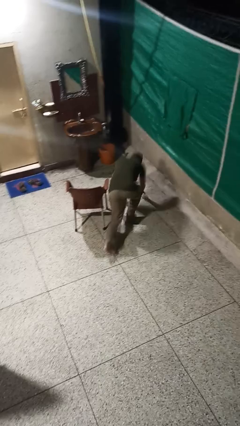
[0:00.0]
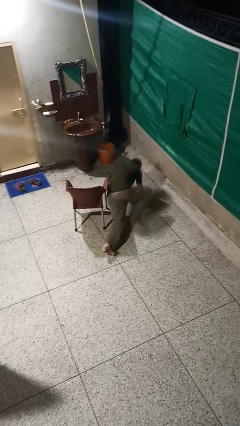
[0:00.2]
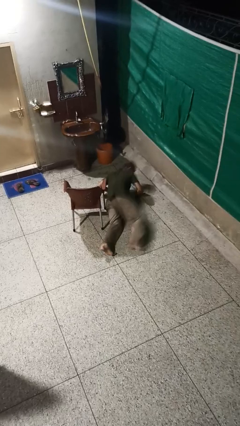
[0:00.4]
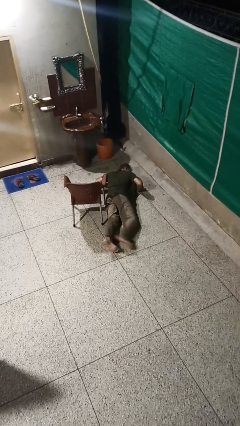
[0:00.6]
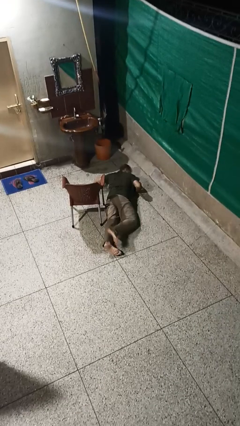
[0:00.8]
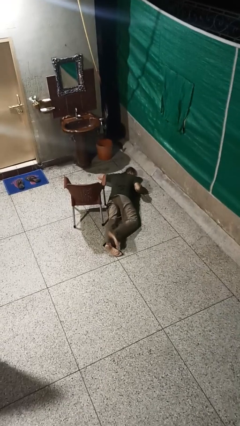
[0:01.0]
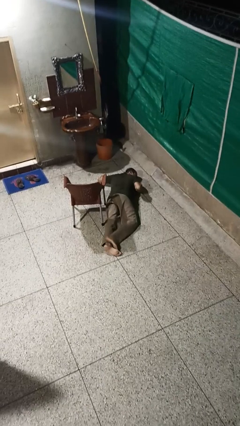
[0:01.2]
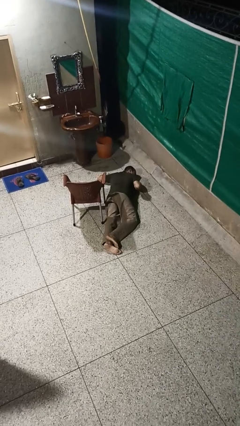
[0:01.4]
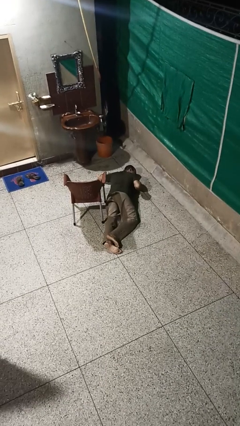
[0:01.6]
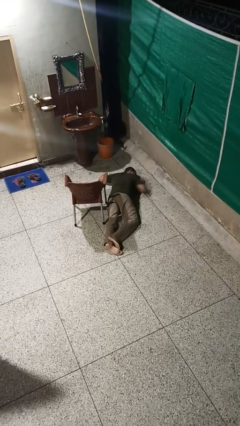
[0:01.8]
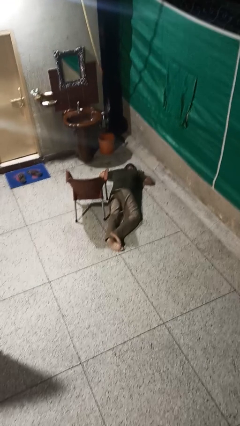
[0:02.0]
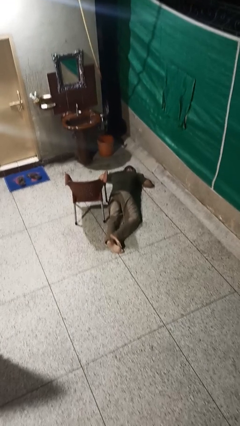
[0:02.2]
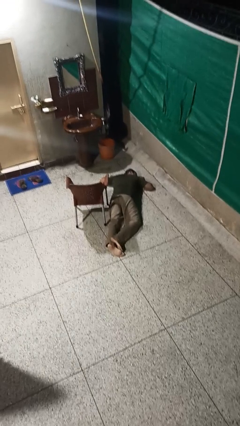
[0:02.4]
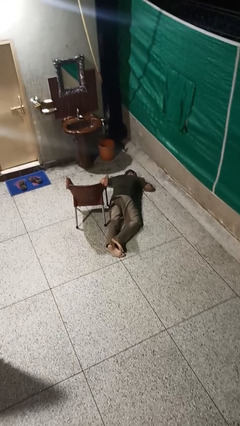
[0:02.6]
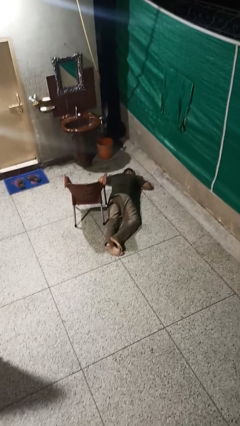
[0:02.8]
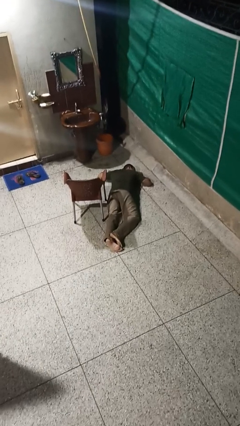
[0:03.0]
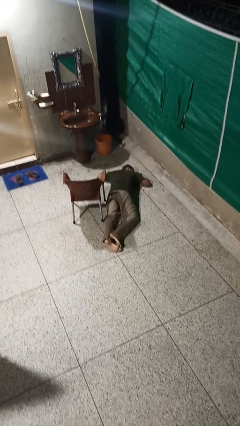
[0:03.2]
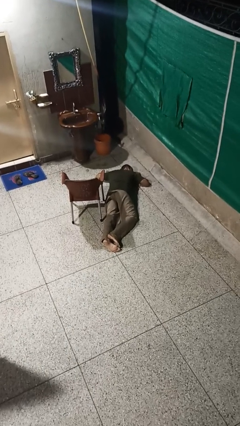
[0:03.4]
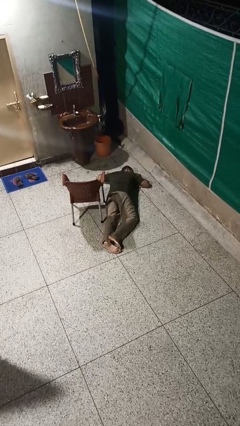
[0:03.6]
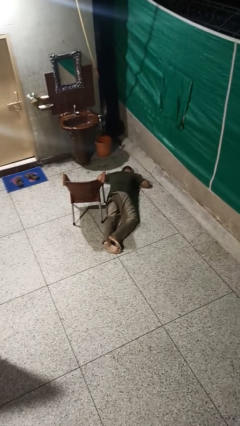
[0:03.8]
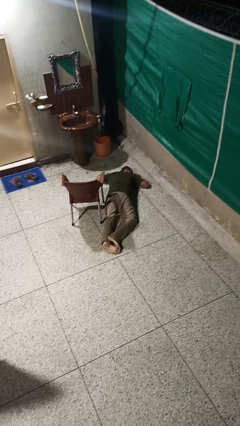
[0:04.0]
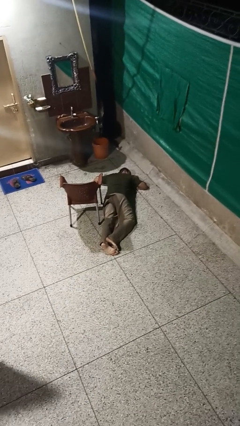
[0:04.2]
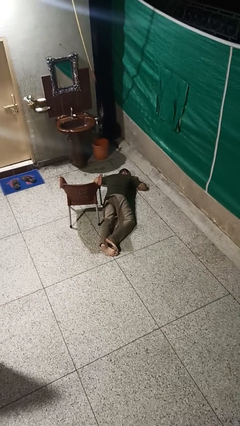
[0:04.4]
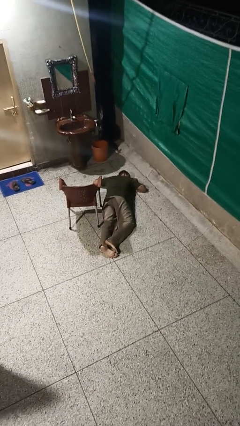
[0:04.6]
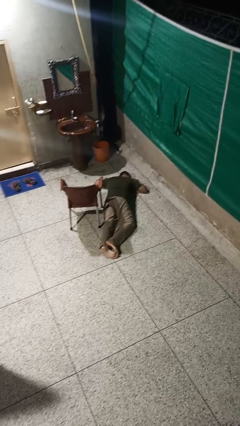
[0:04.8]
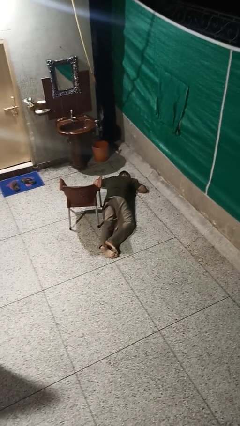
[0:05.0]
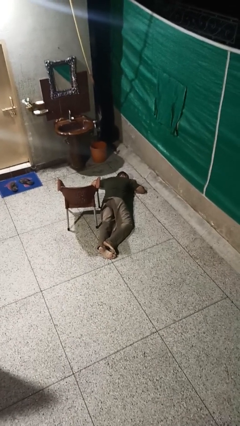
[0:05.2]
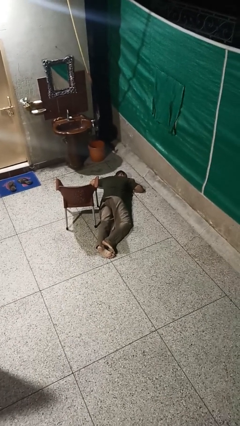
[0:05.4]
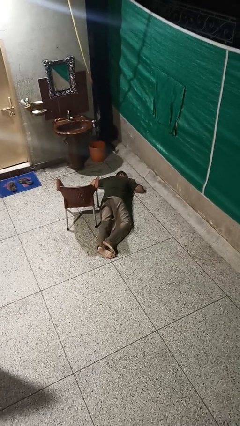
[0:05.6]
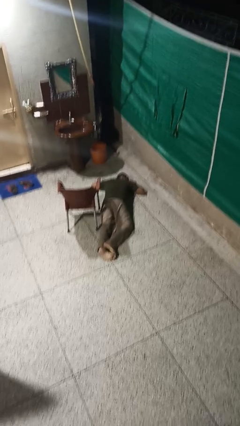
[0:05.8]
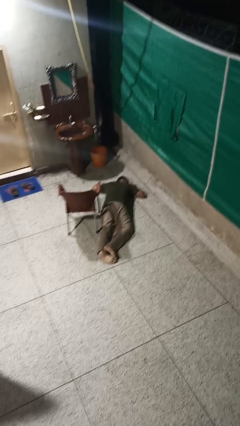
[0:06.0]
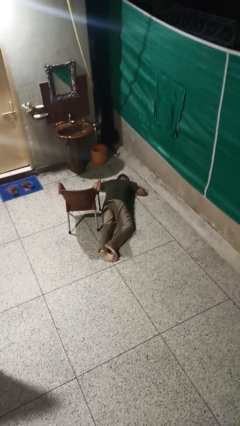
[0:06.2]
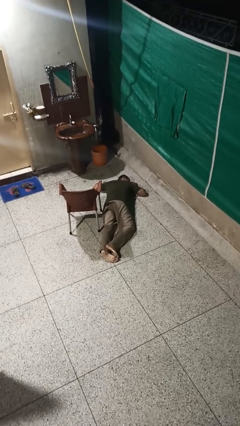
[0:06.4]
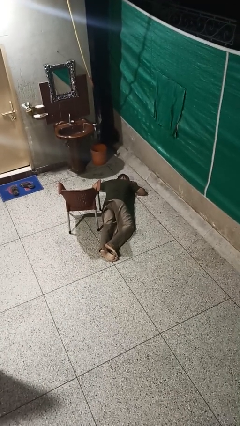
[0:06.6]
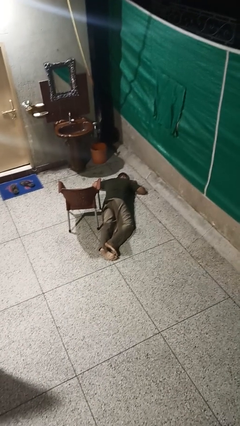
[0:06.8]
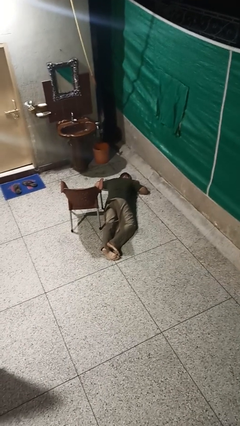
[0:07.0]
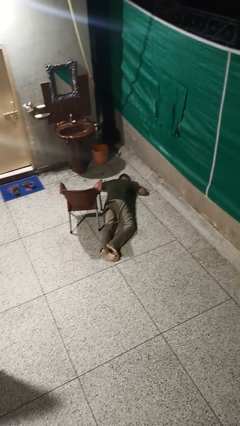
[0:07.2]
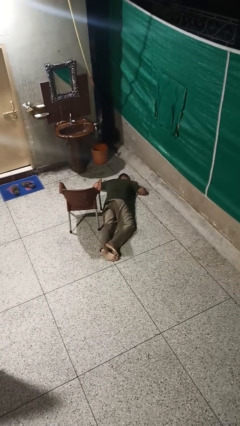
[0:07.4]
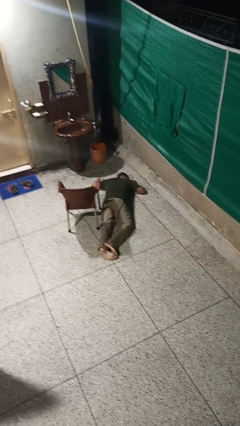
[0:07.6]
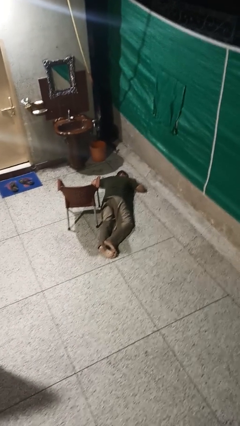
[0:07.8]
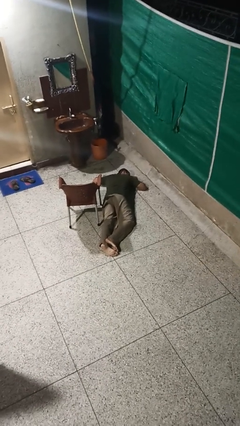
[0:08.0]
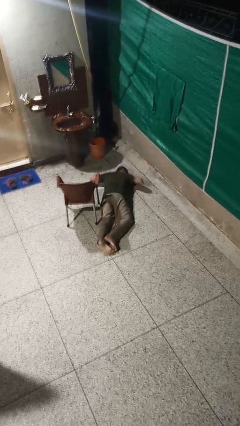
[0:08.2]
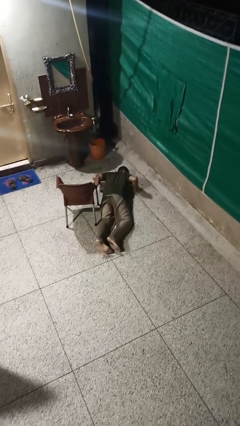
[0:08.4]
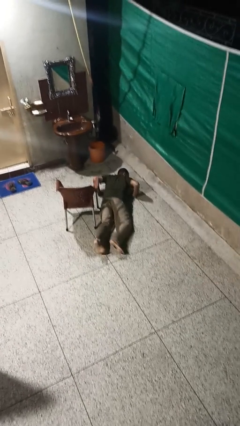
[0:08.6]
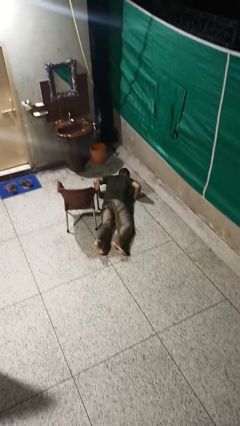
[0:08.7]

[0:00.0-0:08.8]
person lies down on floor

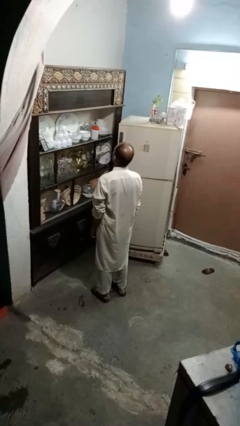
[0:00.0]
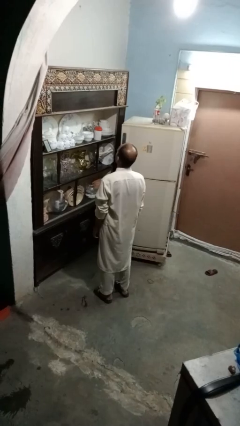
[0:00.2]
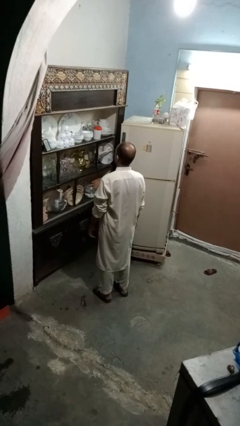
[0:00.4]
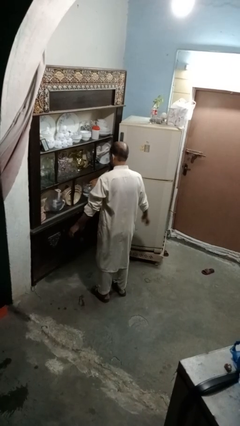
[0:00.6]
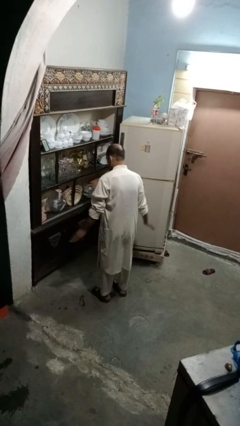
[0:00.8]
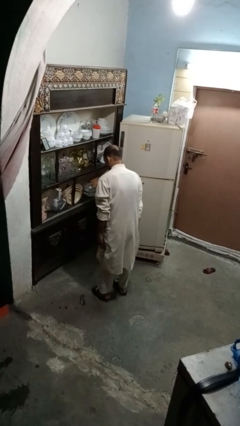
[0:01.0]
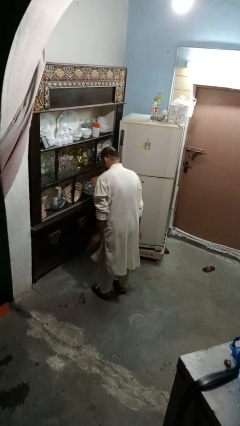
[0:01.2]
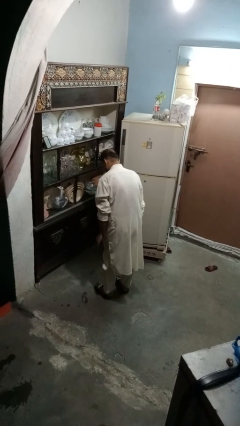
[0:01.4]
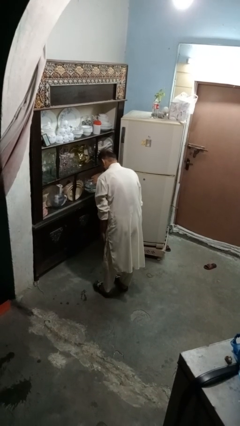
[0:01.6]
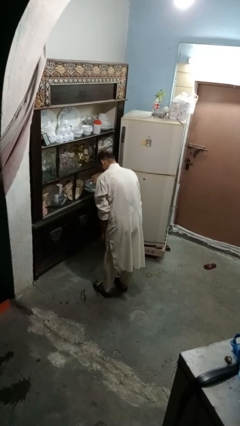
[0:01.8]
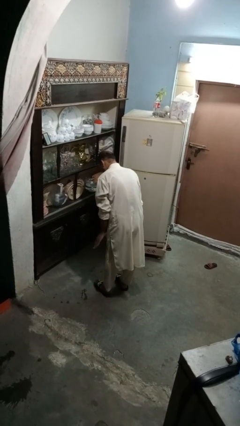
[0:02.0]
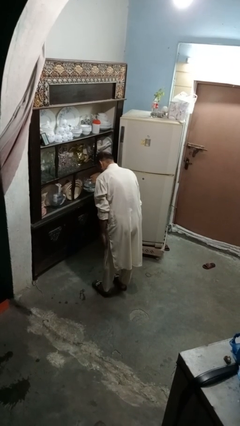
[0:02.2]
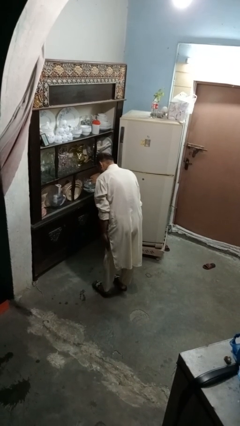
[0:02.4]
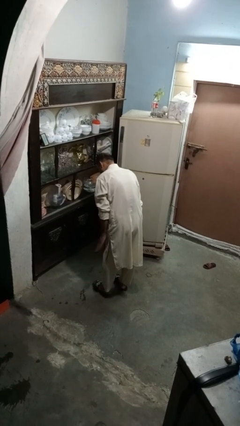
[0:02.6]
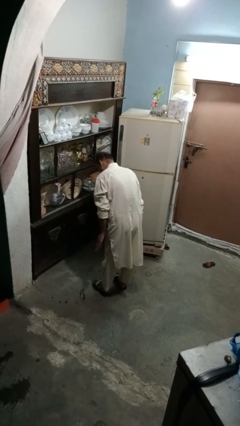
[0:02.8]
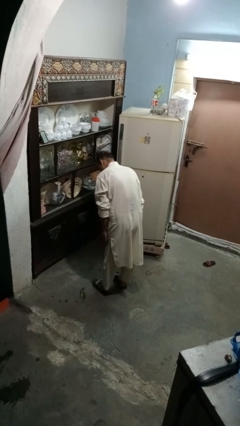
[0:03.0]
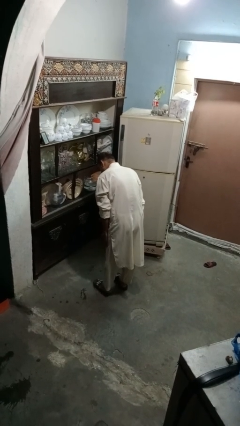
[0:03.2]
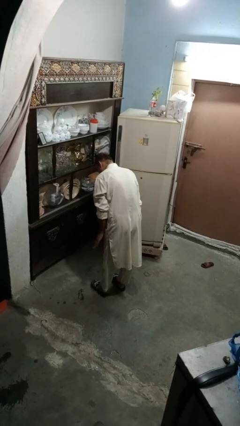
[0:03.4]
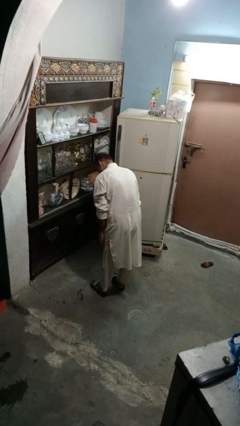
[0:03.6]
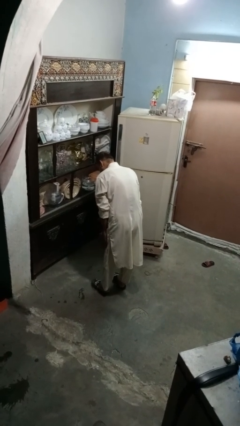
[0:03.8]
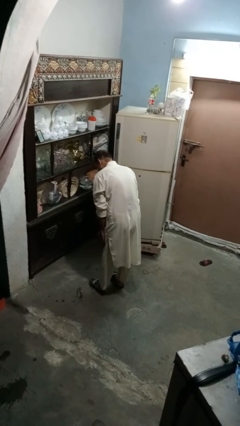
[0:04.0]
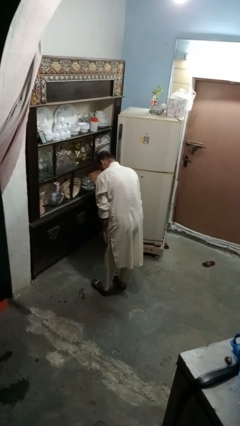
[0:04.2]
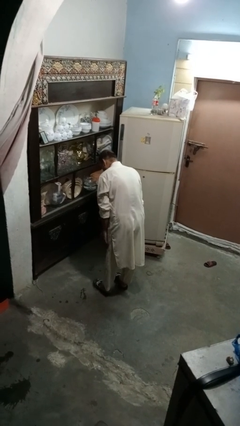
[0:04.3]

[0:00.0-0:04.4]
person slaps hands on thighs

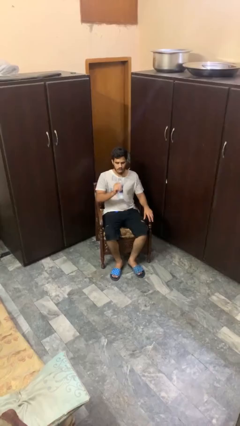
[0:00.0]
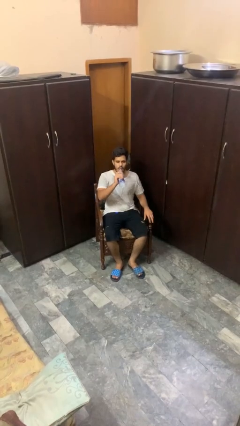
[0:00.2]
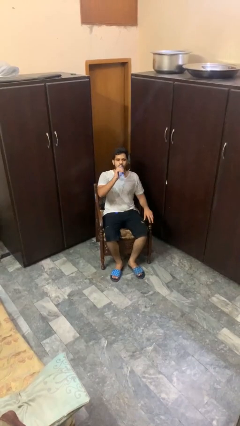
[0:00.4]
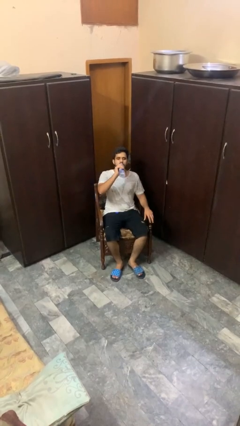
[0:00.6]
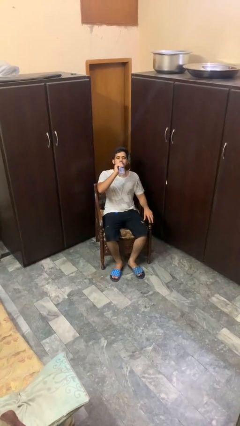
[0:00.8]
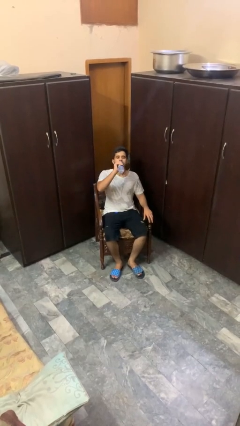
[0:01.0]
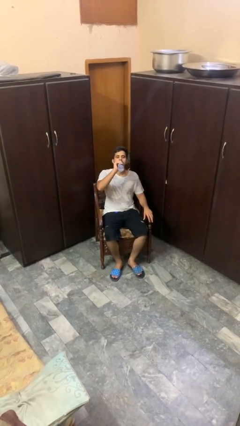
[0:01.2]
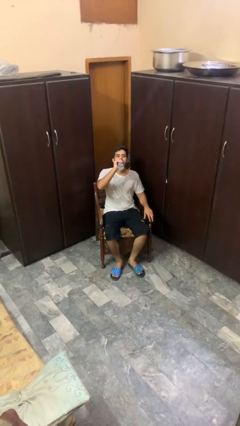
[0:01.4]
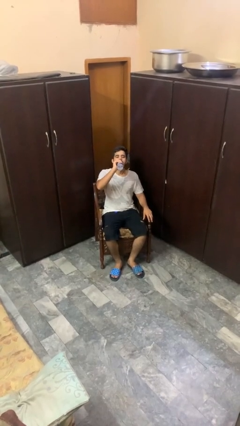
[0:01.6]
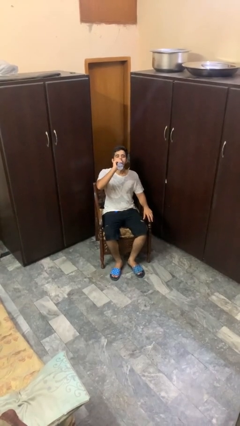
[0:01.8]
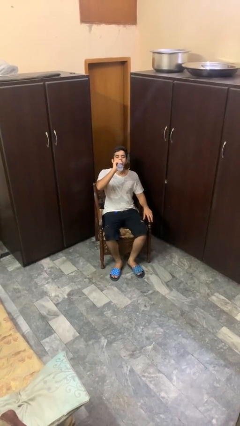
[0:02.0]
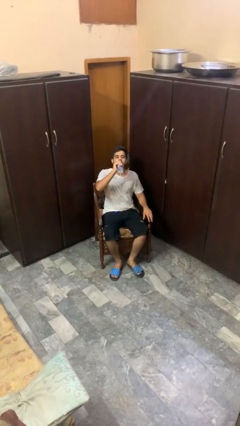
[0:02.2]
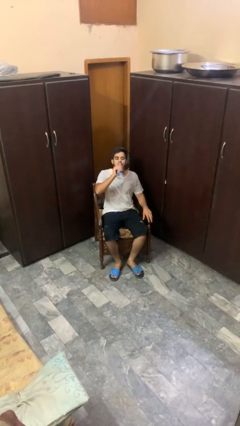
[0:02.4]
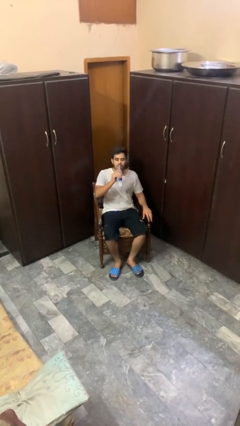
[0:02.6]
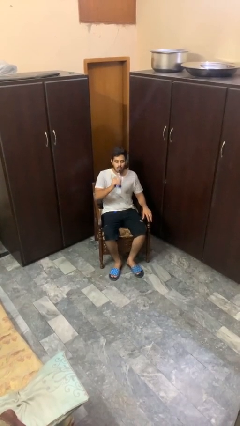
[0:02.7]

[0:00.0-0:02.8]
person drinks from bottle

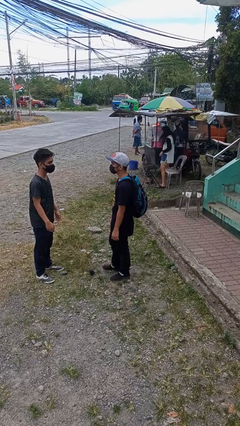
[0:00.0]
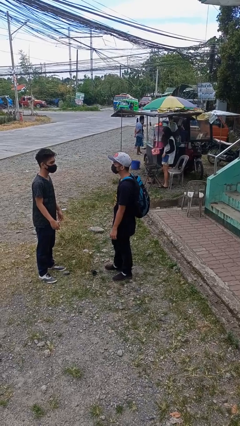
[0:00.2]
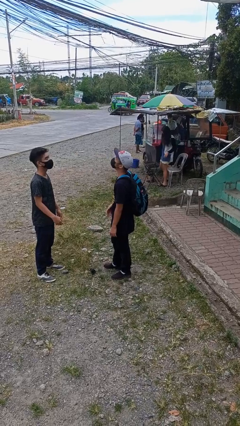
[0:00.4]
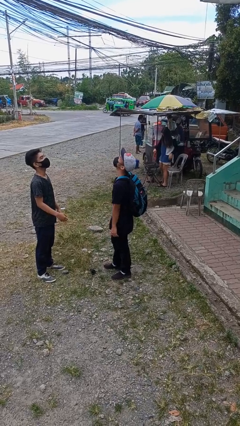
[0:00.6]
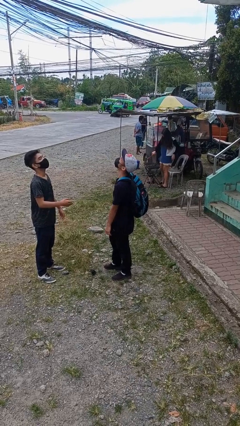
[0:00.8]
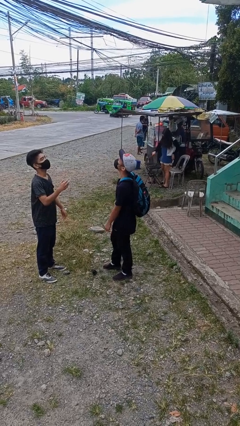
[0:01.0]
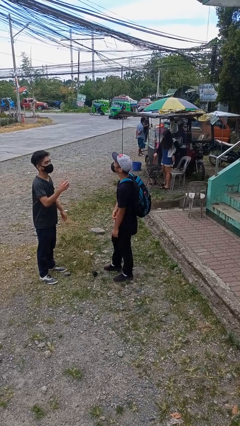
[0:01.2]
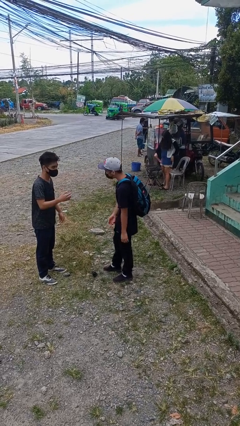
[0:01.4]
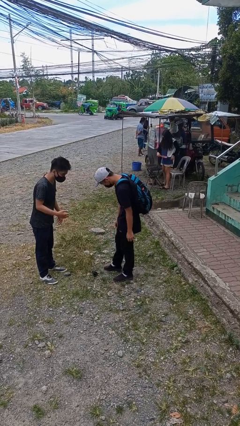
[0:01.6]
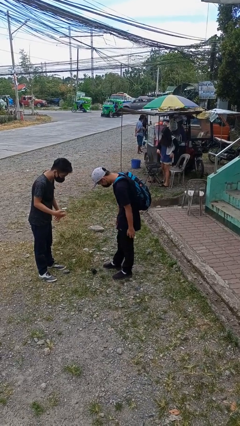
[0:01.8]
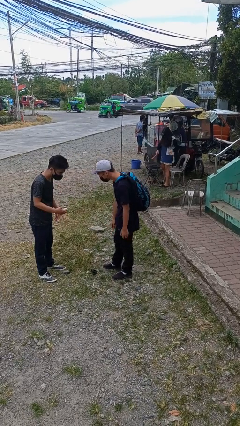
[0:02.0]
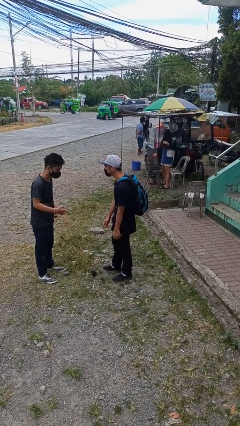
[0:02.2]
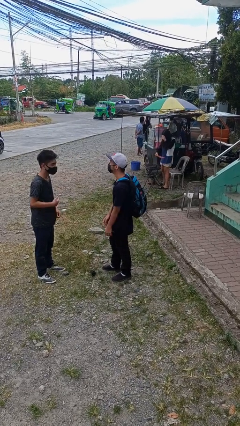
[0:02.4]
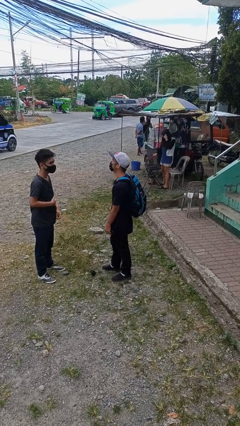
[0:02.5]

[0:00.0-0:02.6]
person laughs with person
